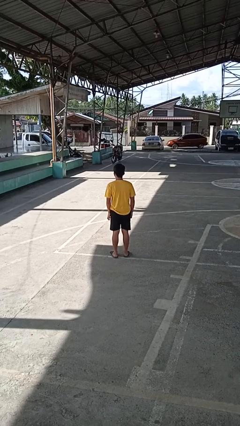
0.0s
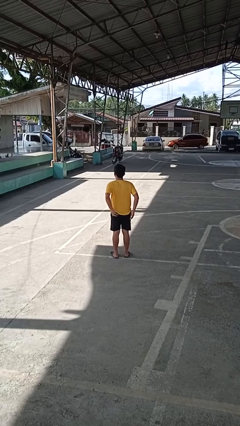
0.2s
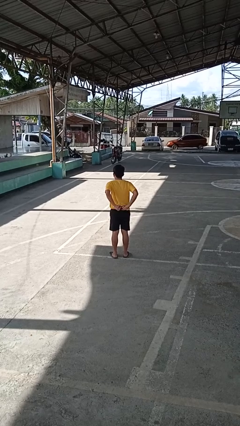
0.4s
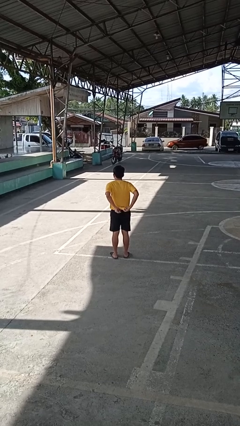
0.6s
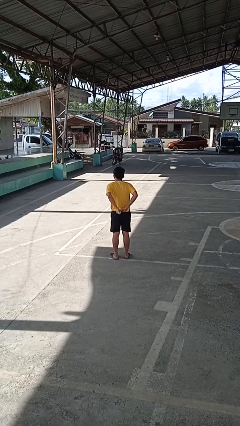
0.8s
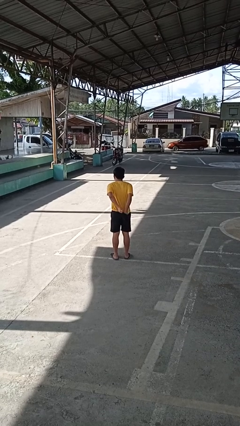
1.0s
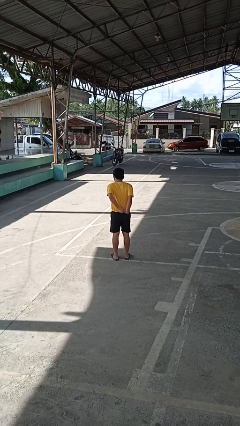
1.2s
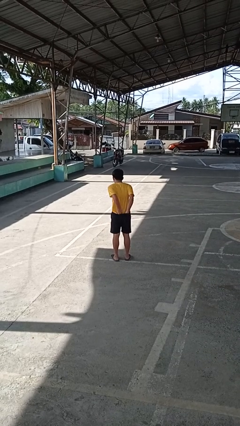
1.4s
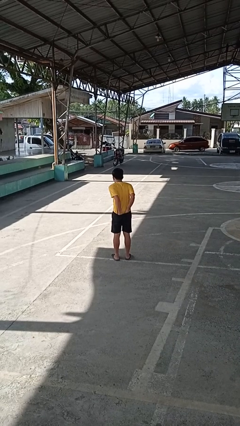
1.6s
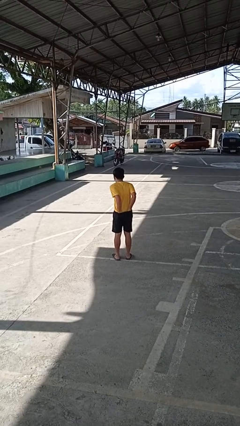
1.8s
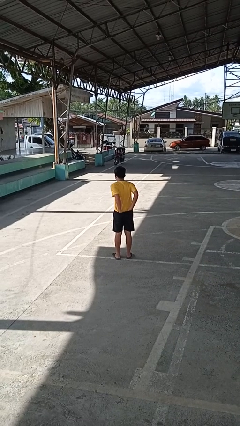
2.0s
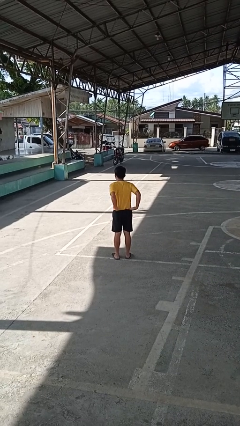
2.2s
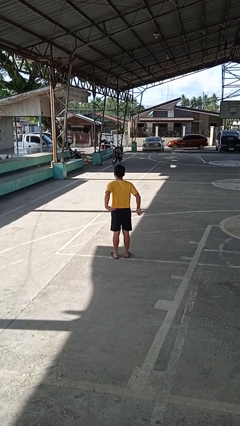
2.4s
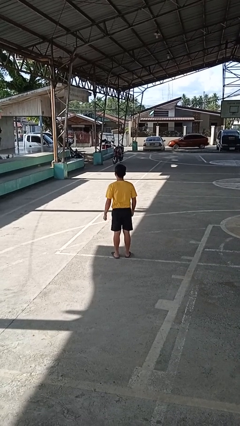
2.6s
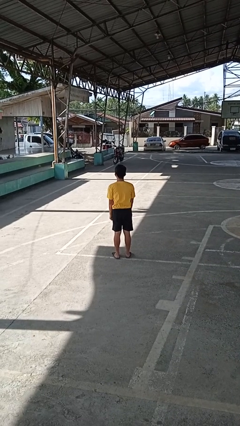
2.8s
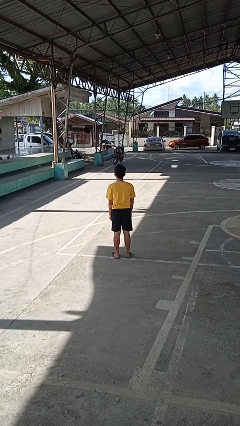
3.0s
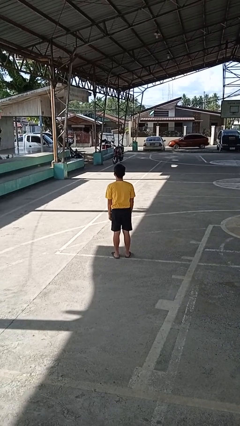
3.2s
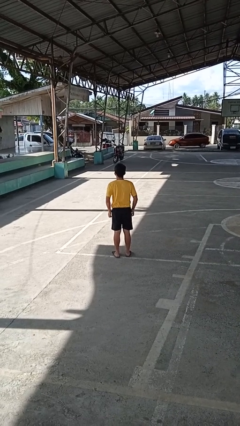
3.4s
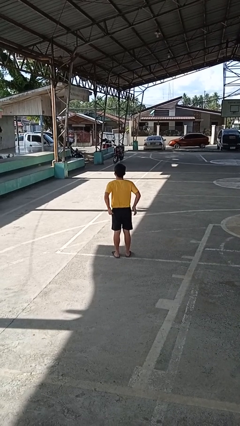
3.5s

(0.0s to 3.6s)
person tucks in shirt

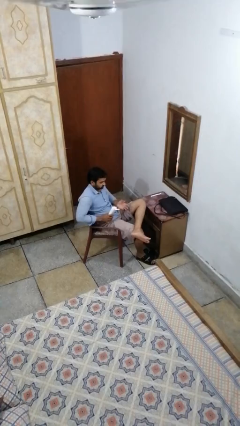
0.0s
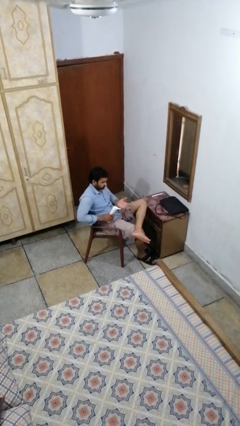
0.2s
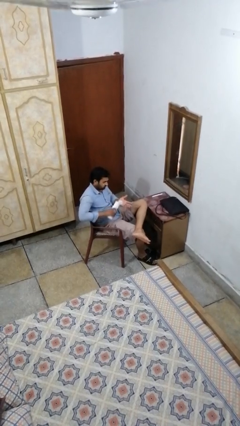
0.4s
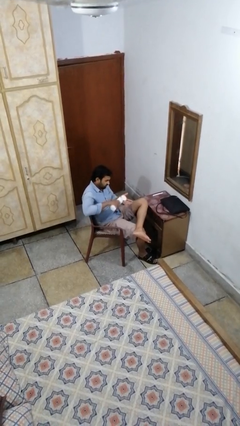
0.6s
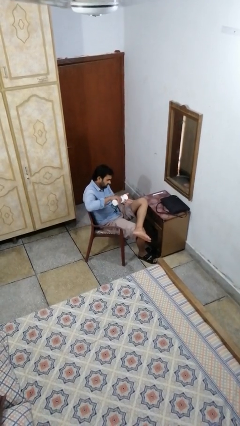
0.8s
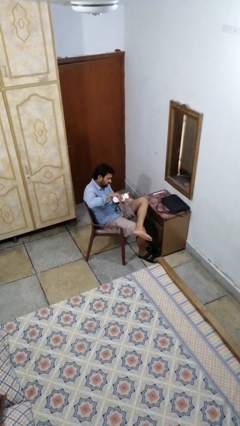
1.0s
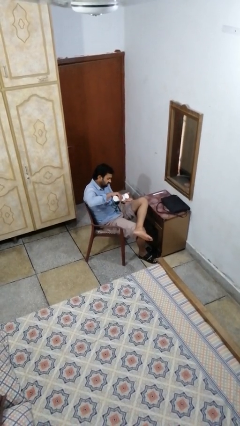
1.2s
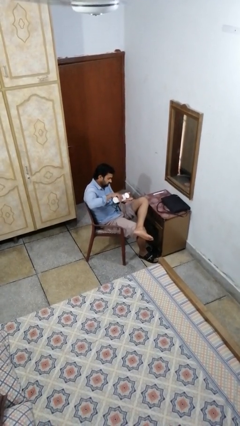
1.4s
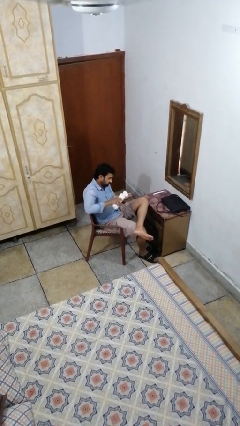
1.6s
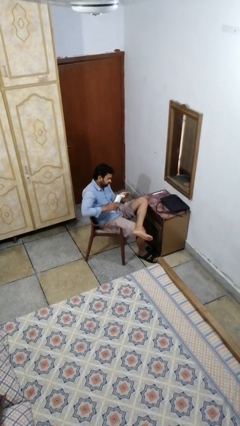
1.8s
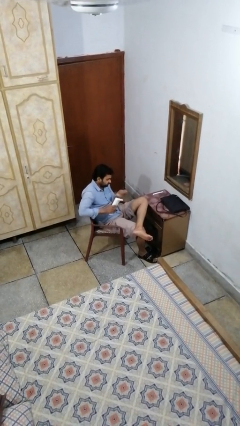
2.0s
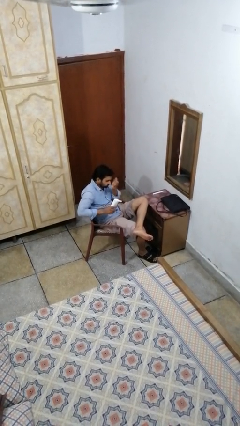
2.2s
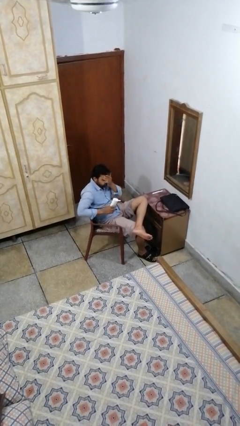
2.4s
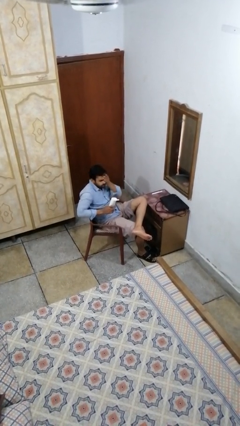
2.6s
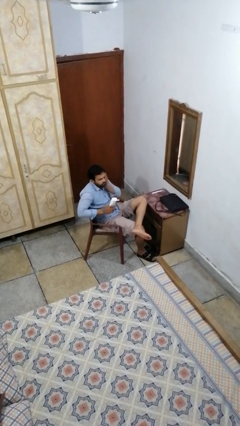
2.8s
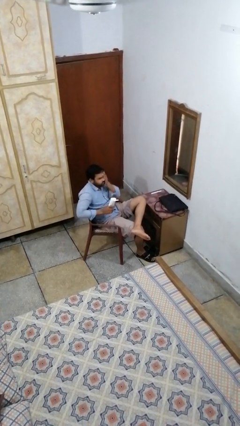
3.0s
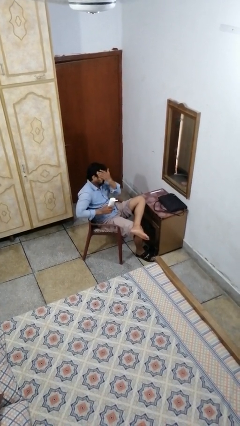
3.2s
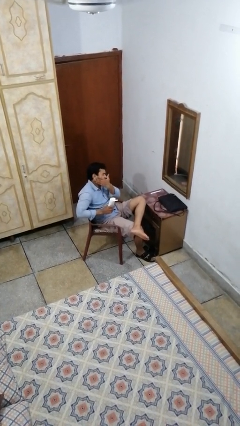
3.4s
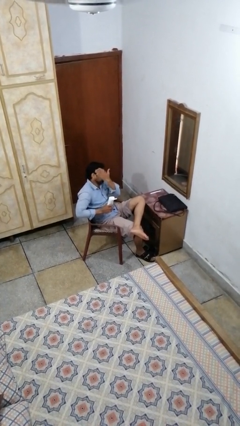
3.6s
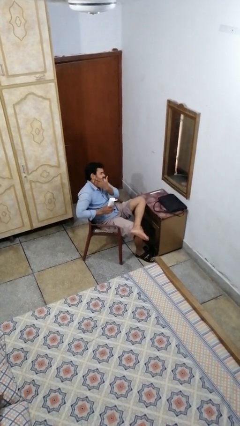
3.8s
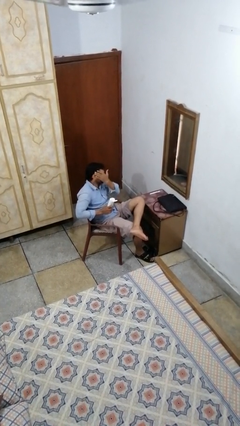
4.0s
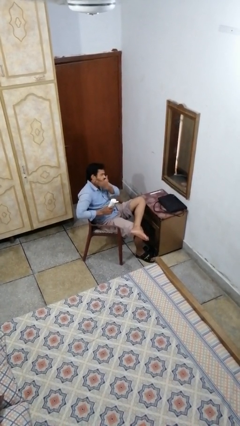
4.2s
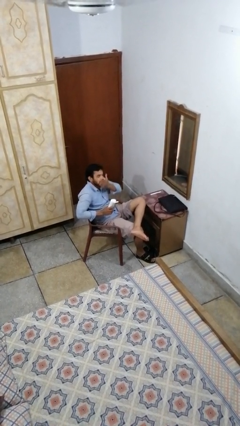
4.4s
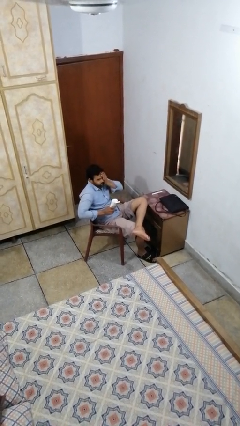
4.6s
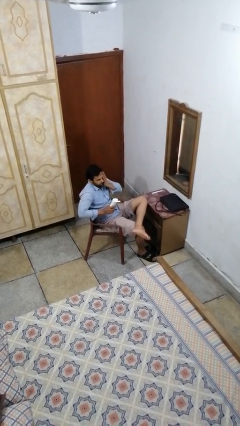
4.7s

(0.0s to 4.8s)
person applies sunscreen

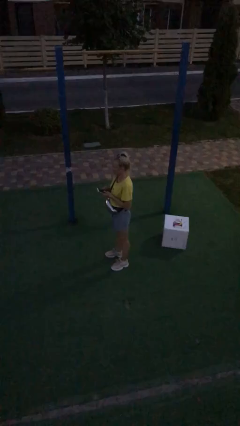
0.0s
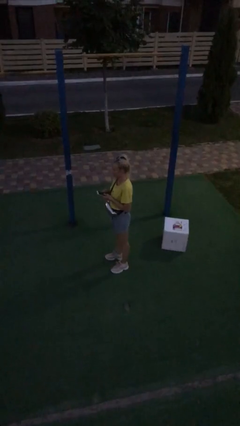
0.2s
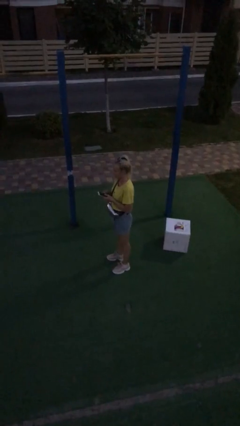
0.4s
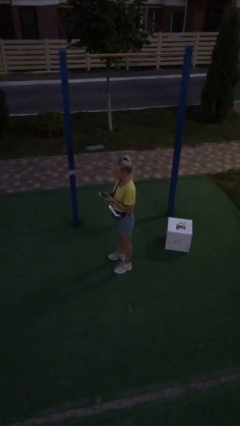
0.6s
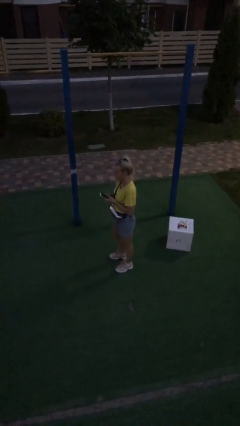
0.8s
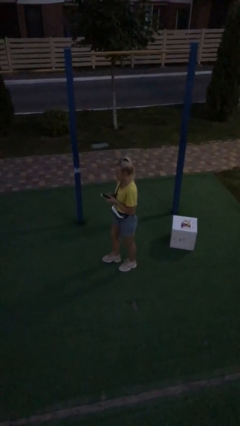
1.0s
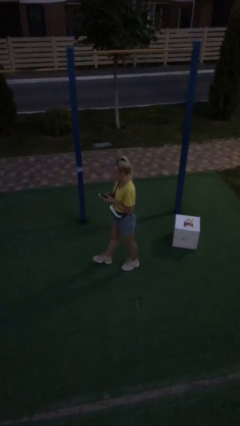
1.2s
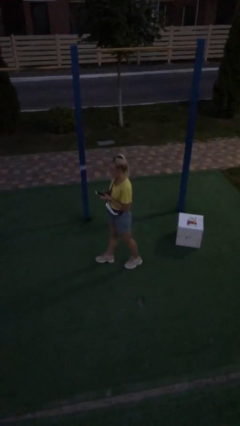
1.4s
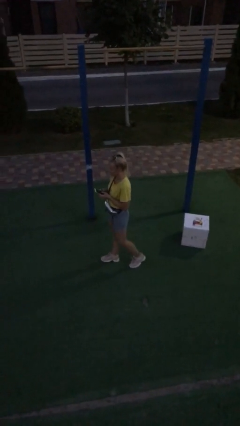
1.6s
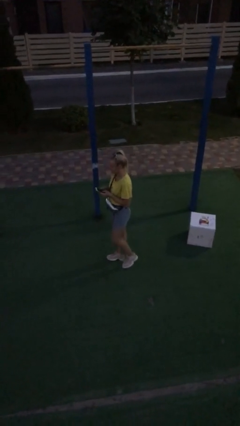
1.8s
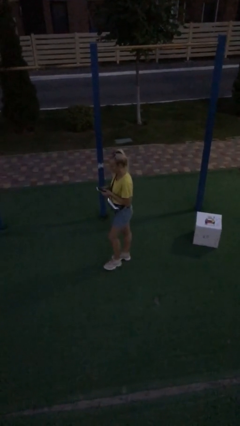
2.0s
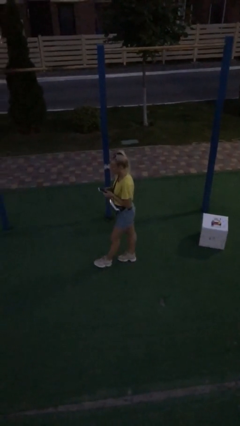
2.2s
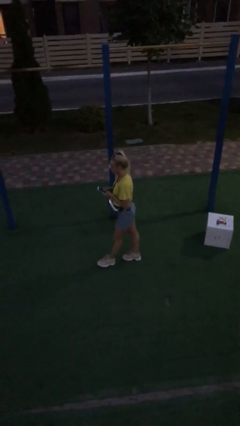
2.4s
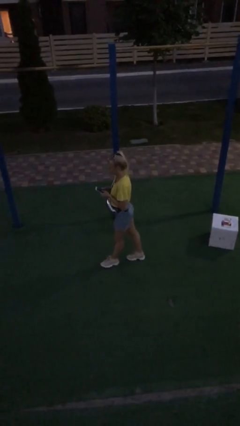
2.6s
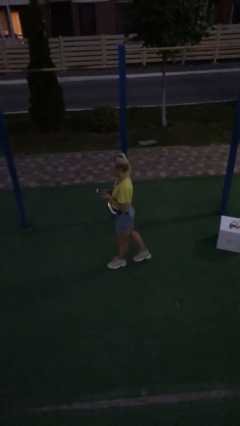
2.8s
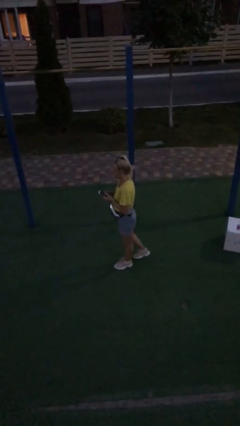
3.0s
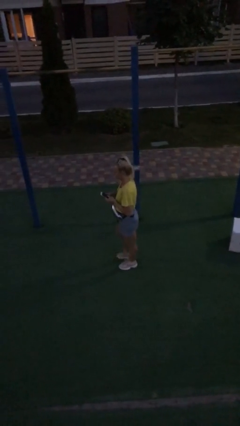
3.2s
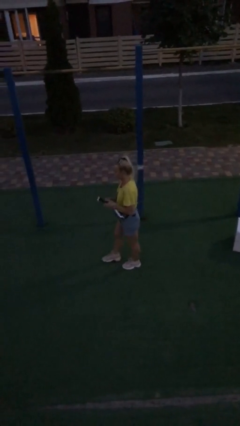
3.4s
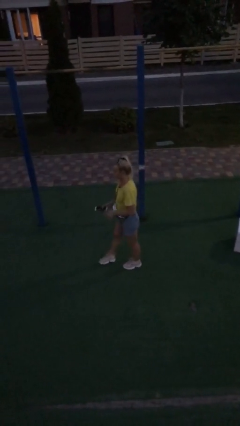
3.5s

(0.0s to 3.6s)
person texts on phone

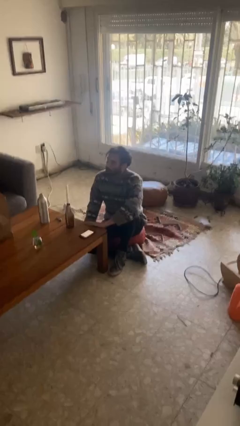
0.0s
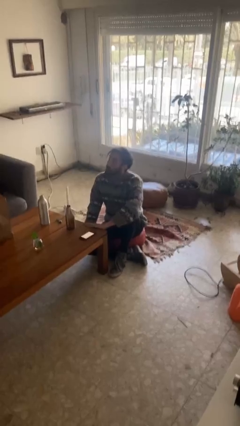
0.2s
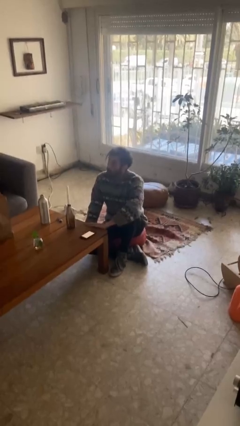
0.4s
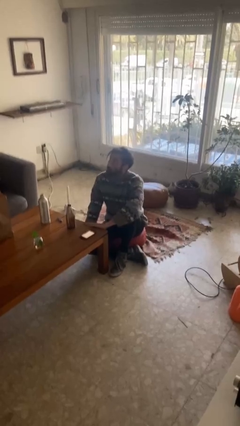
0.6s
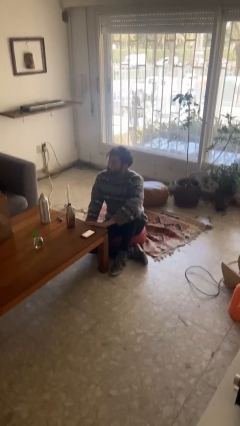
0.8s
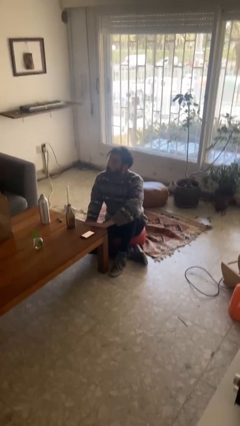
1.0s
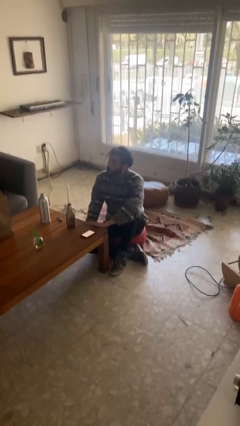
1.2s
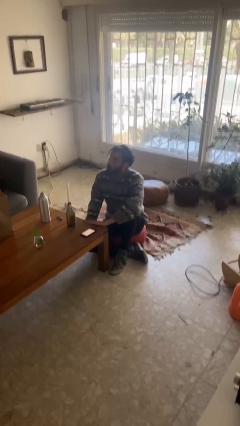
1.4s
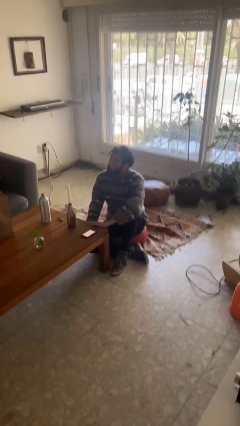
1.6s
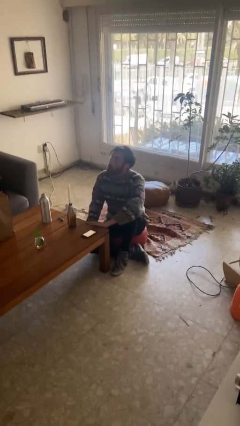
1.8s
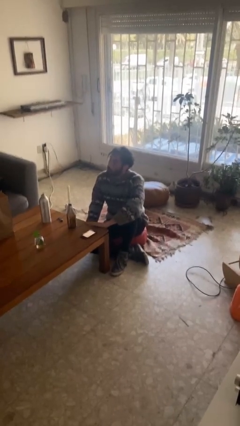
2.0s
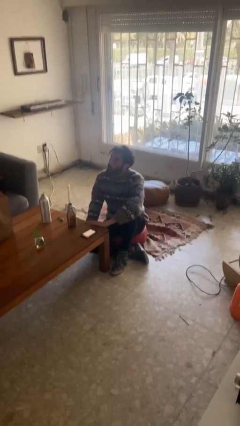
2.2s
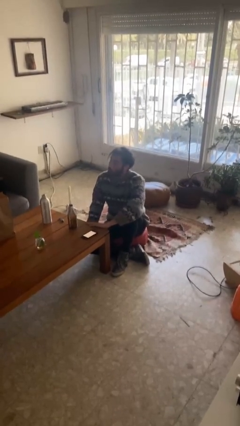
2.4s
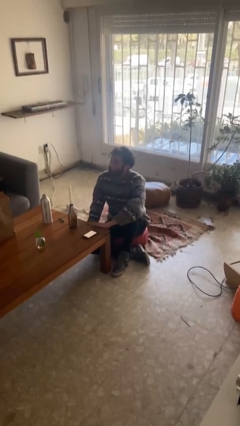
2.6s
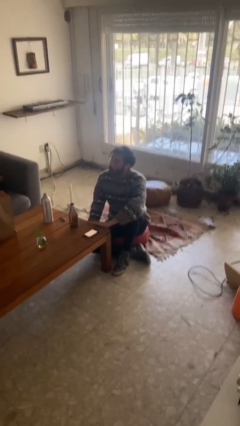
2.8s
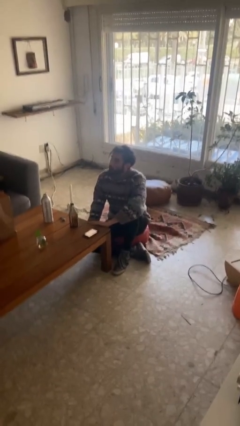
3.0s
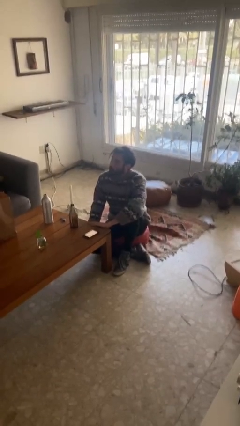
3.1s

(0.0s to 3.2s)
person nods head

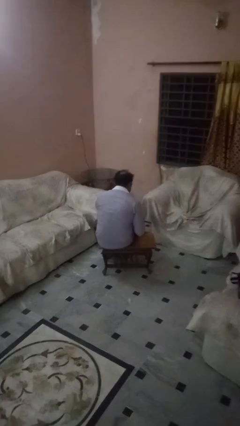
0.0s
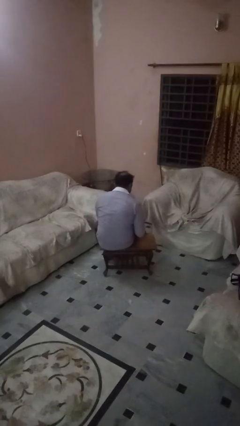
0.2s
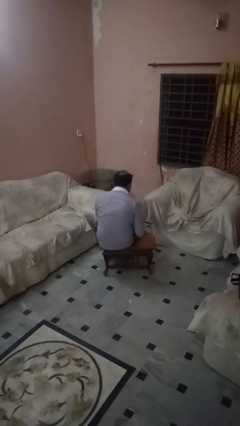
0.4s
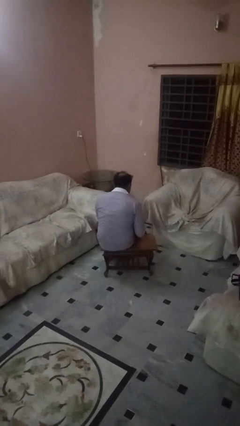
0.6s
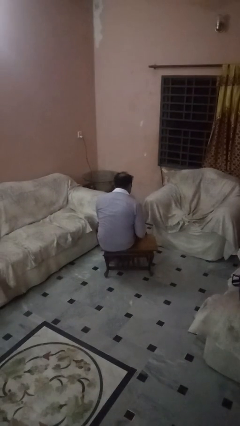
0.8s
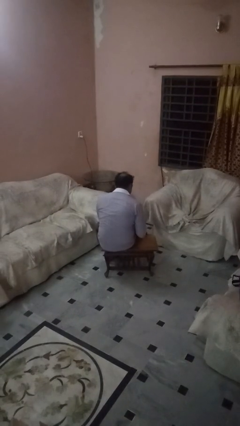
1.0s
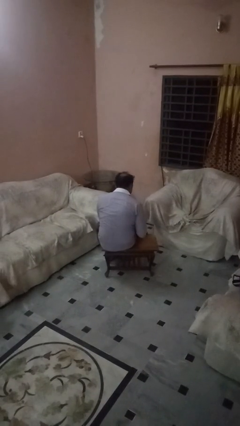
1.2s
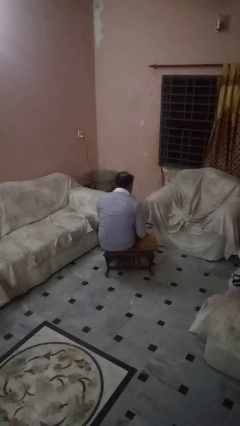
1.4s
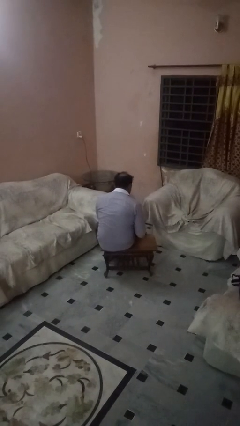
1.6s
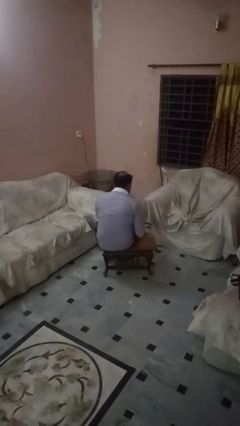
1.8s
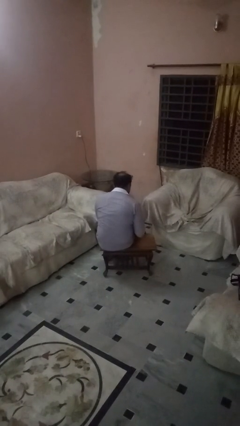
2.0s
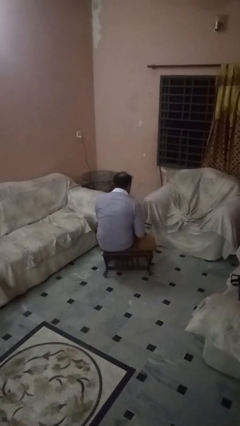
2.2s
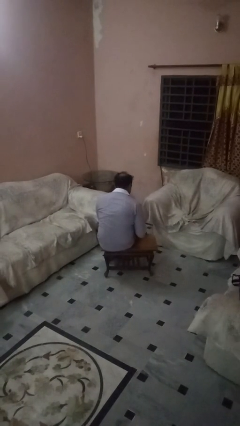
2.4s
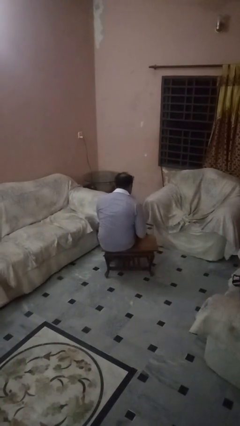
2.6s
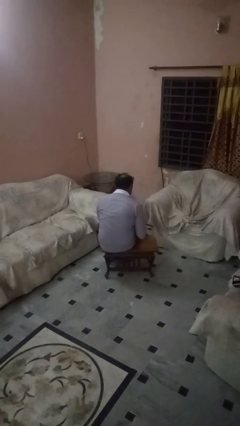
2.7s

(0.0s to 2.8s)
person paints fingernails
